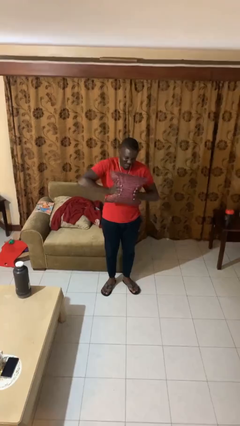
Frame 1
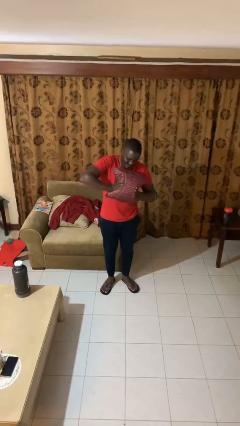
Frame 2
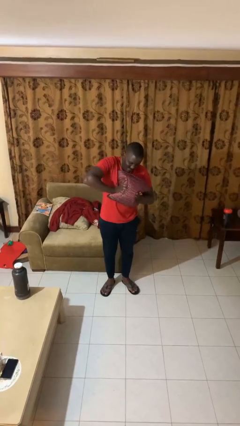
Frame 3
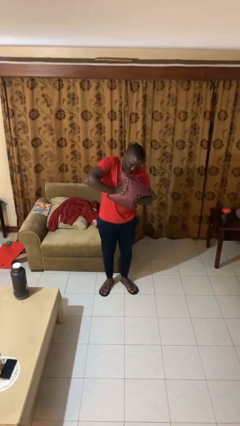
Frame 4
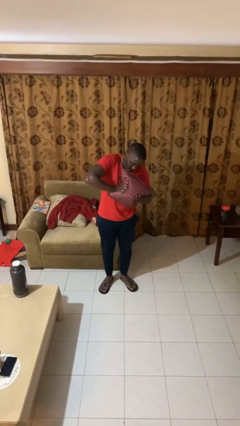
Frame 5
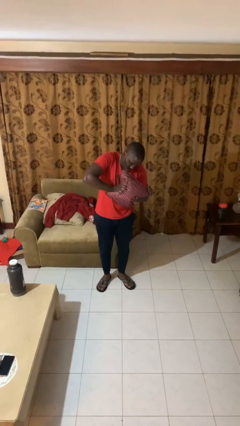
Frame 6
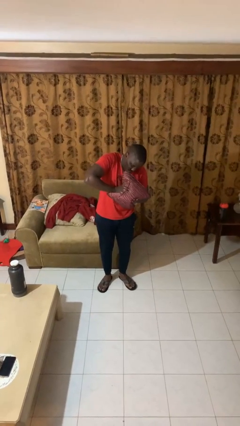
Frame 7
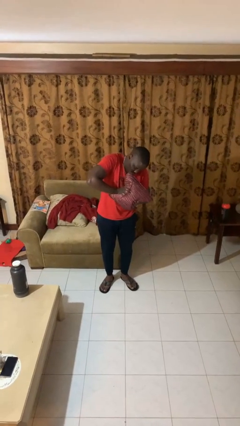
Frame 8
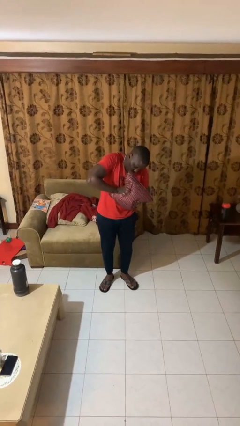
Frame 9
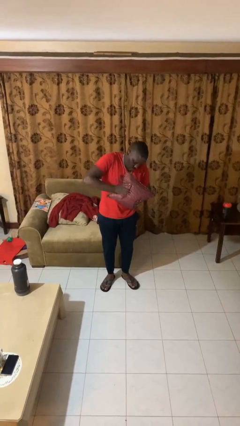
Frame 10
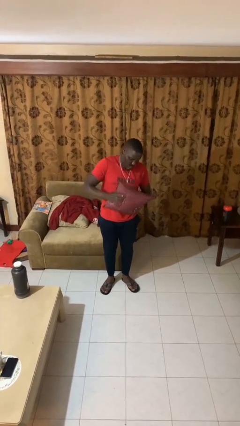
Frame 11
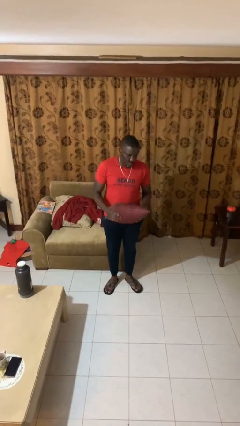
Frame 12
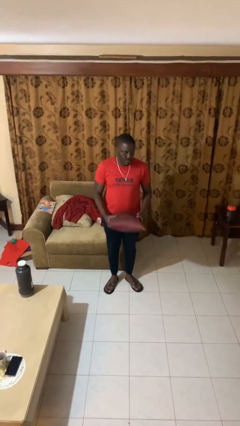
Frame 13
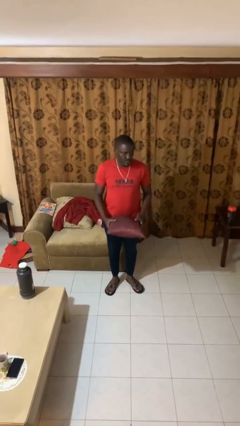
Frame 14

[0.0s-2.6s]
person squeezes object

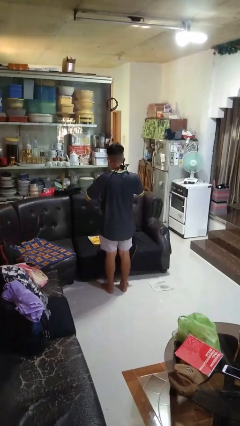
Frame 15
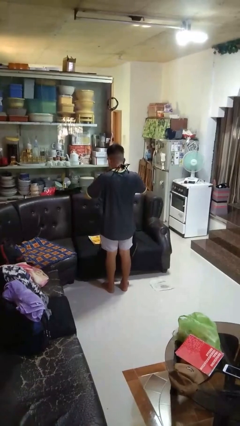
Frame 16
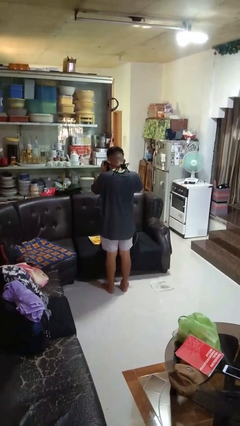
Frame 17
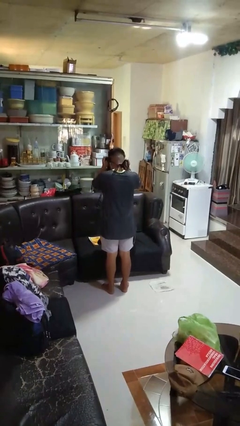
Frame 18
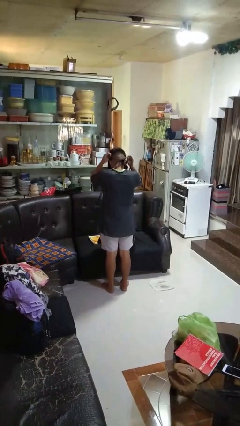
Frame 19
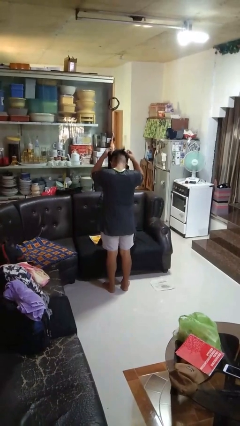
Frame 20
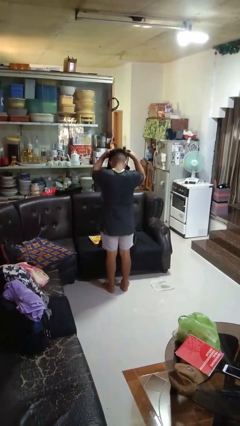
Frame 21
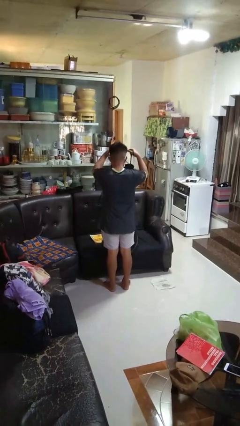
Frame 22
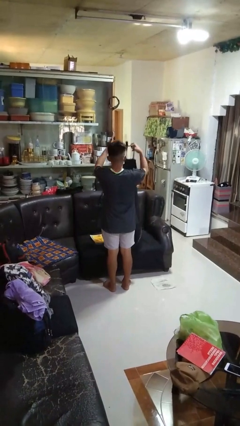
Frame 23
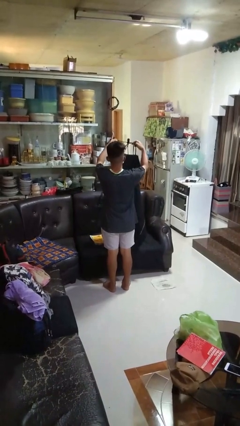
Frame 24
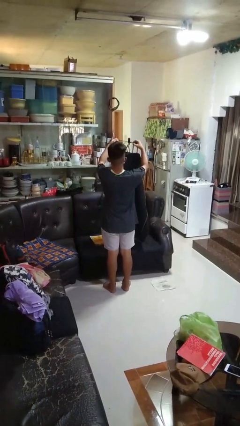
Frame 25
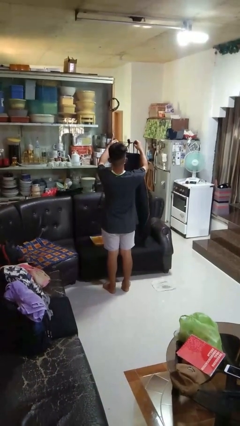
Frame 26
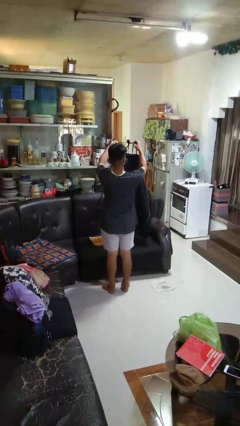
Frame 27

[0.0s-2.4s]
person takes off apron

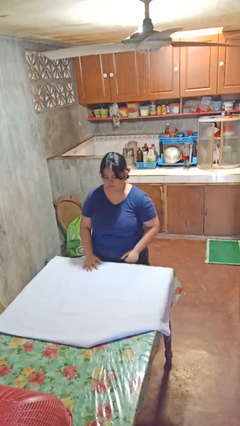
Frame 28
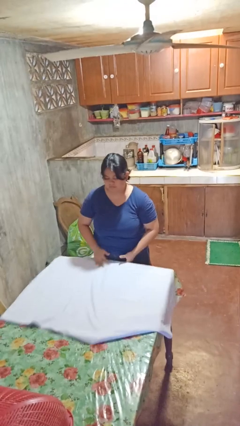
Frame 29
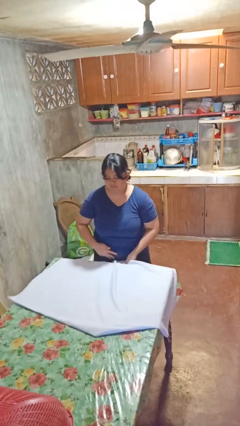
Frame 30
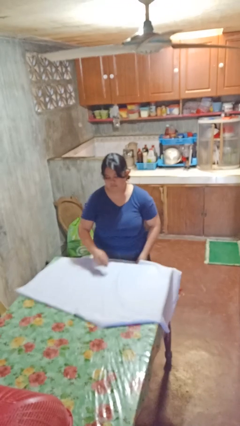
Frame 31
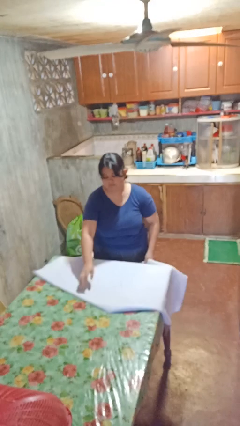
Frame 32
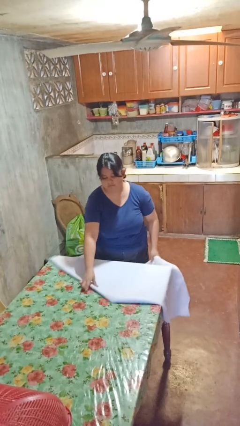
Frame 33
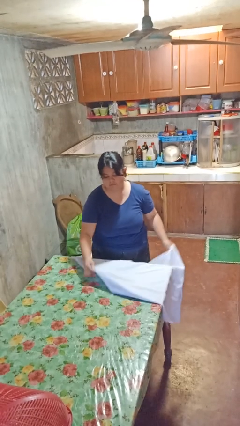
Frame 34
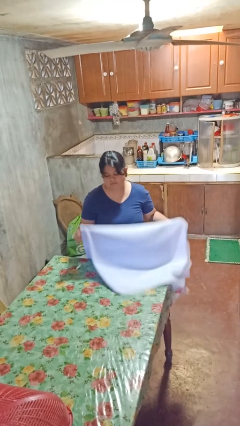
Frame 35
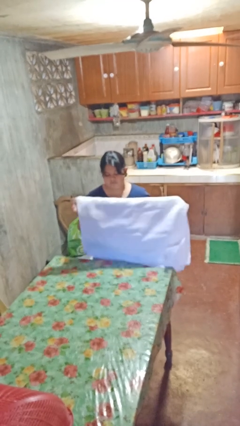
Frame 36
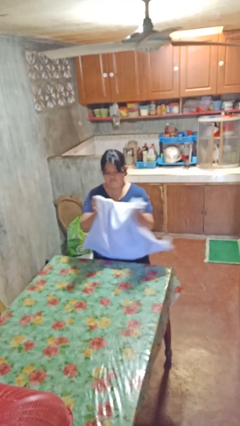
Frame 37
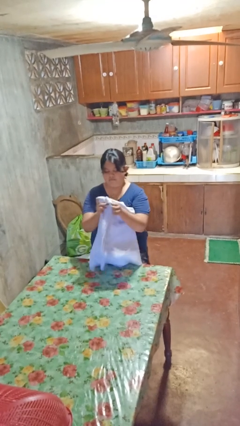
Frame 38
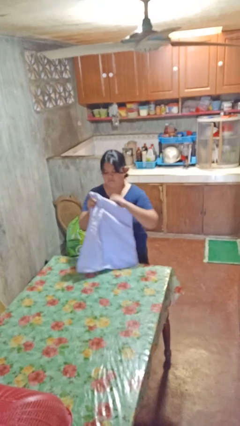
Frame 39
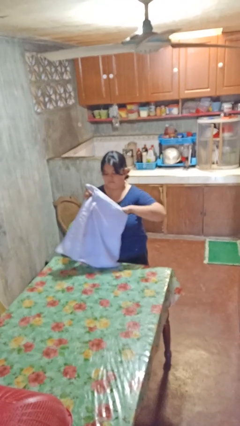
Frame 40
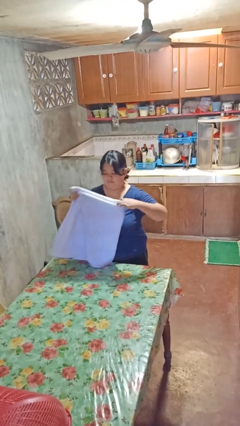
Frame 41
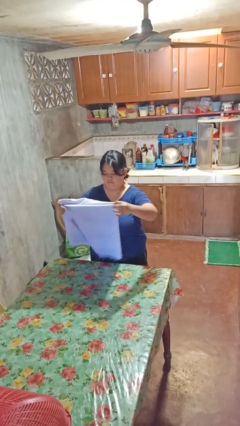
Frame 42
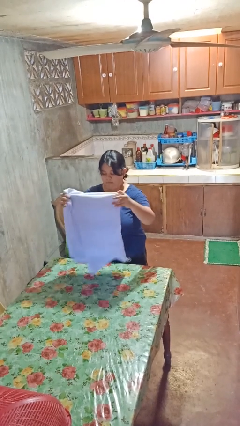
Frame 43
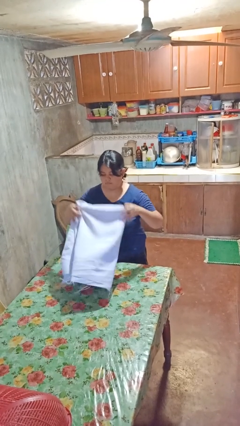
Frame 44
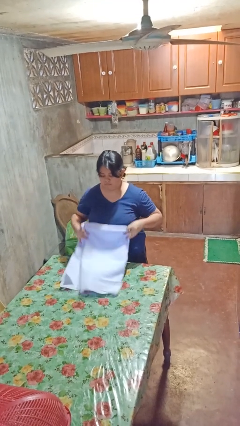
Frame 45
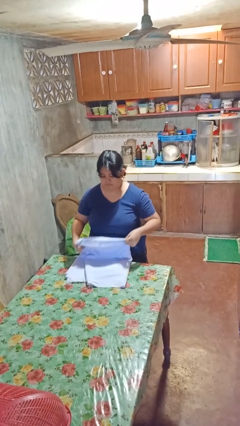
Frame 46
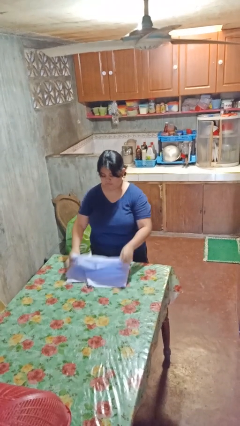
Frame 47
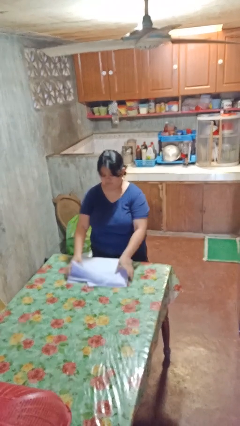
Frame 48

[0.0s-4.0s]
person folds tablecloth

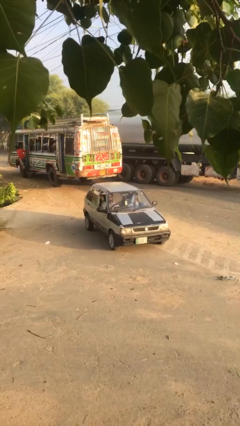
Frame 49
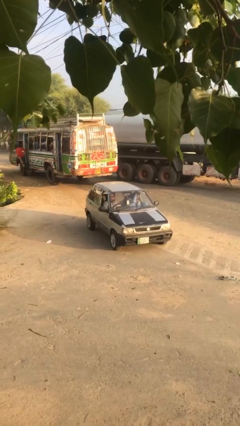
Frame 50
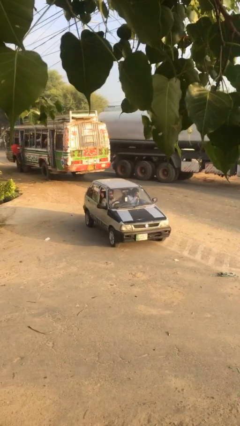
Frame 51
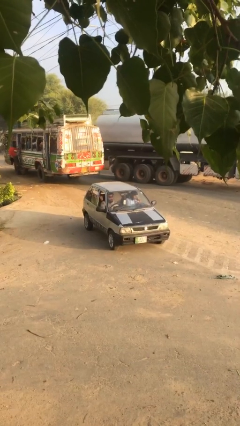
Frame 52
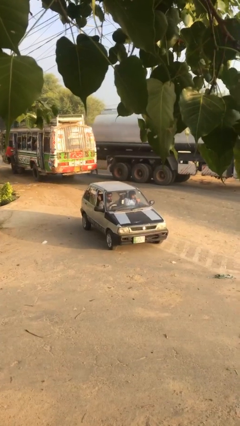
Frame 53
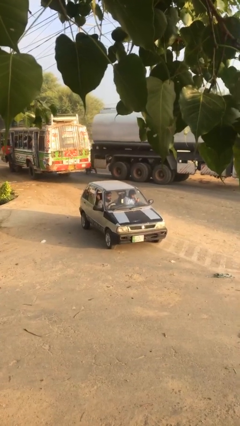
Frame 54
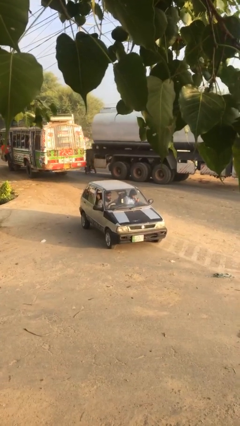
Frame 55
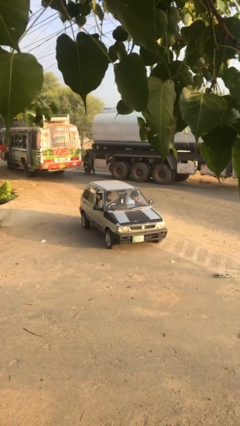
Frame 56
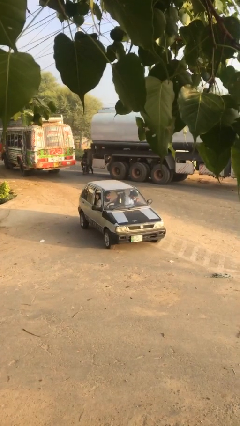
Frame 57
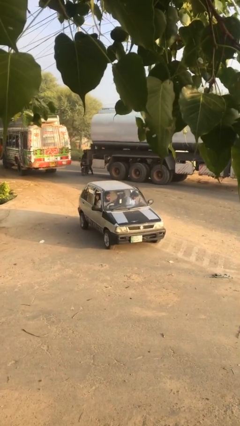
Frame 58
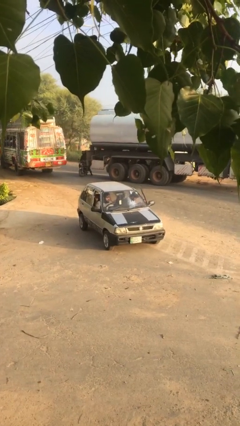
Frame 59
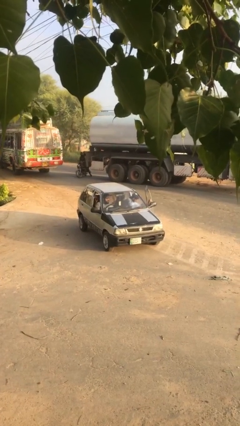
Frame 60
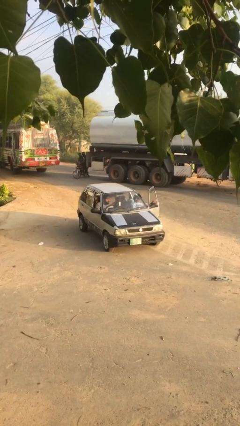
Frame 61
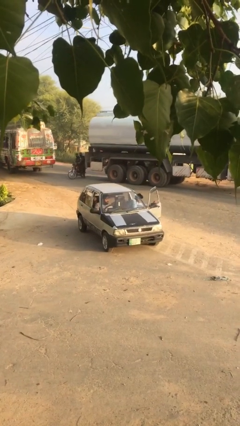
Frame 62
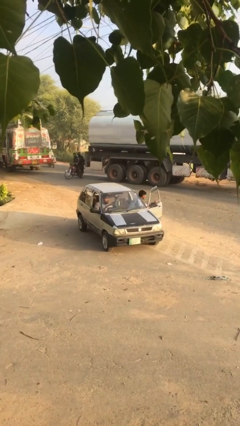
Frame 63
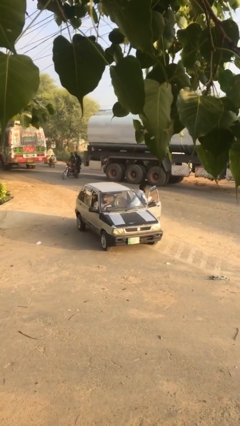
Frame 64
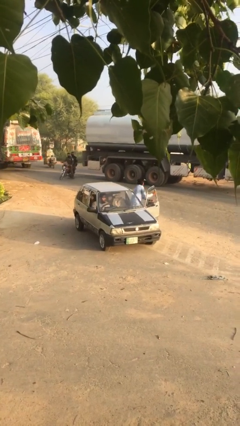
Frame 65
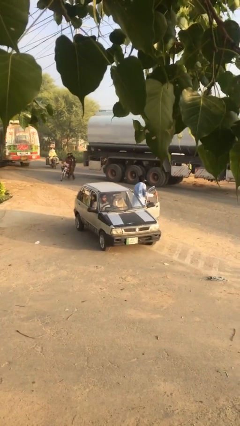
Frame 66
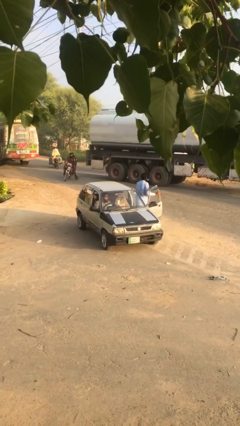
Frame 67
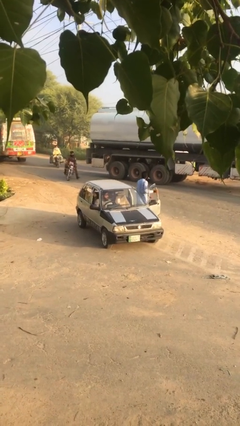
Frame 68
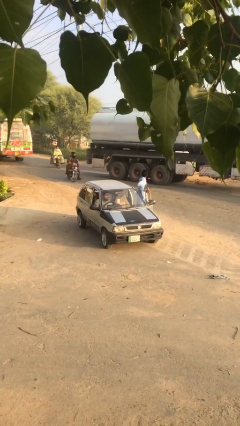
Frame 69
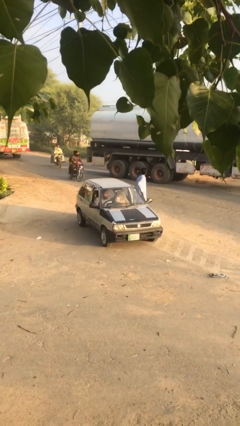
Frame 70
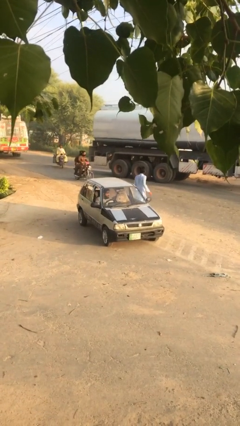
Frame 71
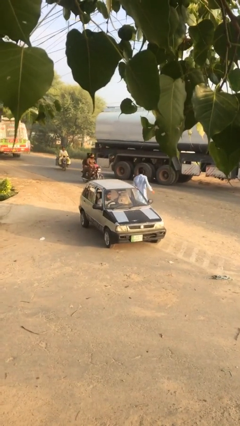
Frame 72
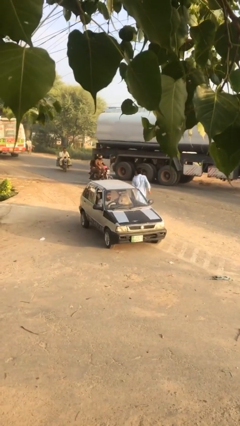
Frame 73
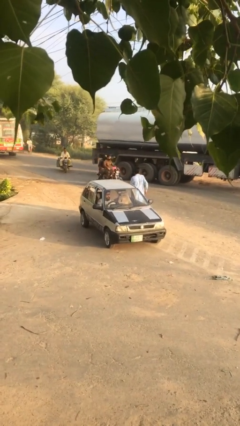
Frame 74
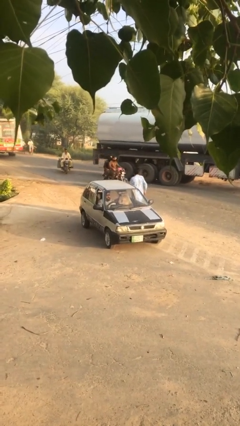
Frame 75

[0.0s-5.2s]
car drops off person

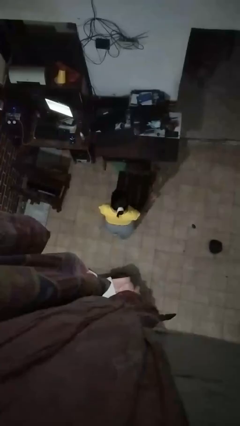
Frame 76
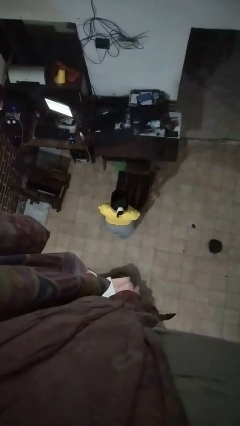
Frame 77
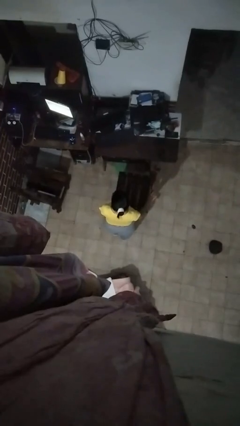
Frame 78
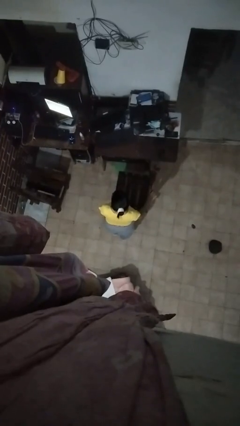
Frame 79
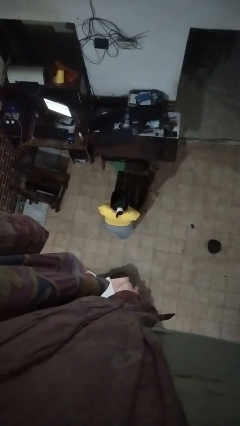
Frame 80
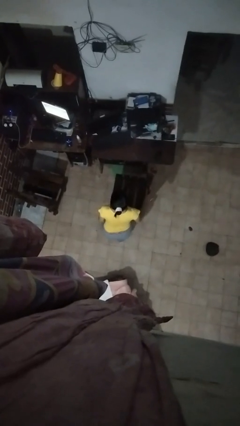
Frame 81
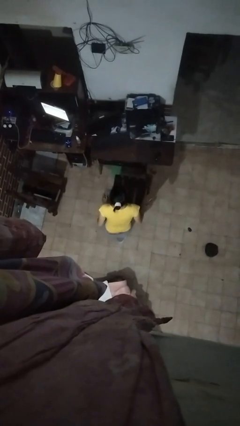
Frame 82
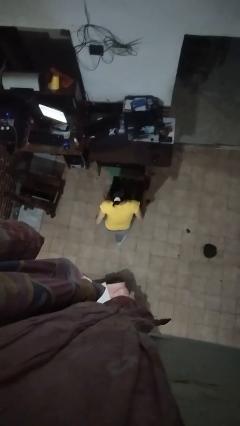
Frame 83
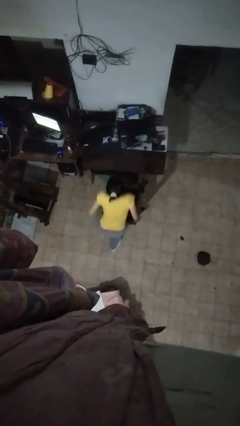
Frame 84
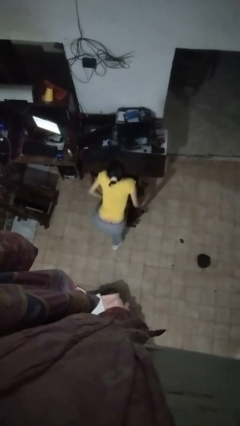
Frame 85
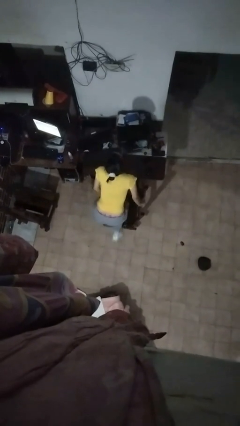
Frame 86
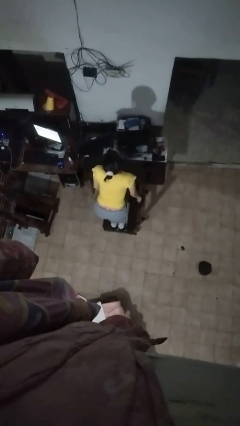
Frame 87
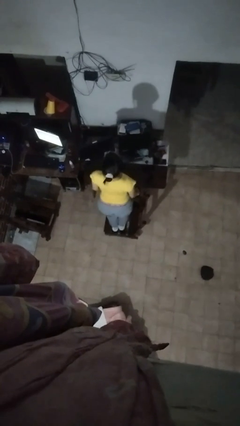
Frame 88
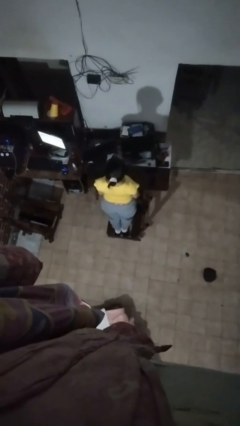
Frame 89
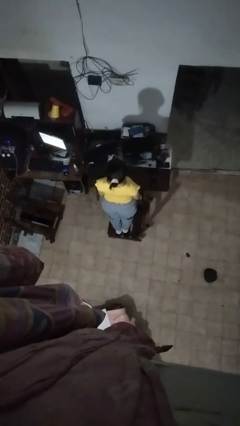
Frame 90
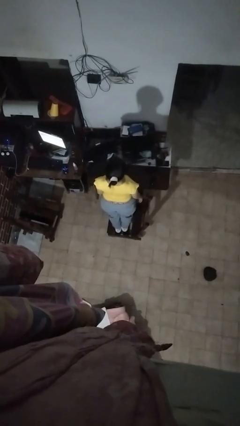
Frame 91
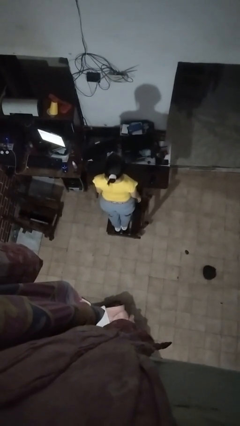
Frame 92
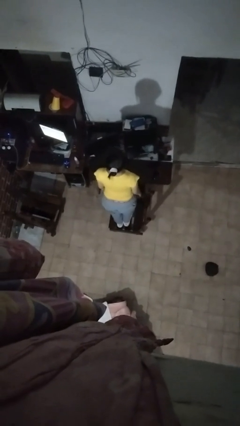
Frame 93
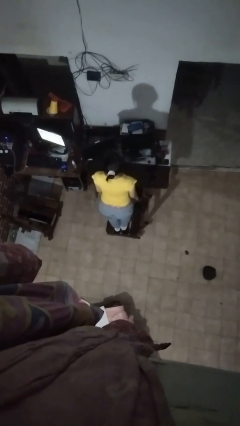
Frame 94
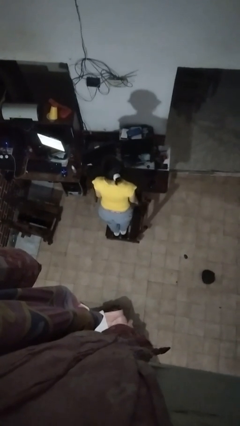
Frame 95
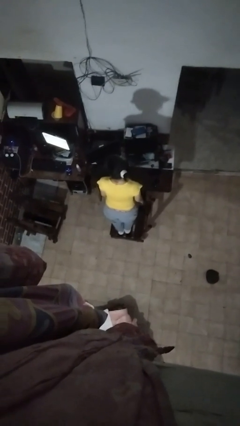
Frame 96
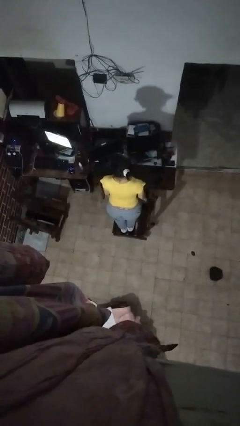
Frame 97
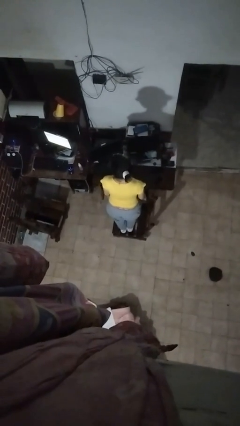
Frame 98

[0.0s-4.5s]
person climbs on chair
